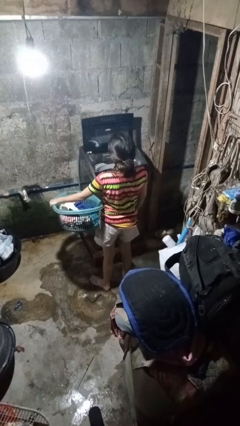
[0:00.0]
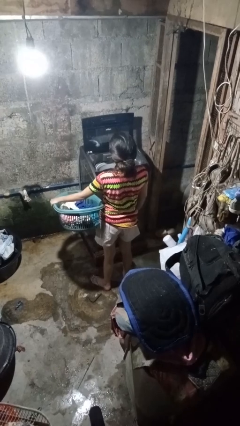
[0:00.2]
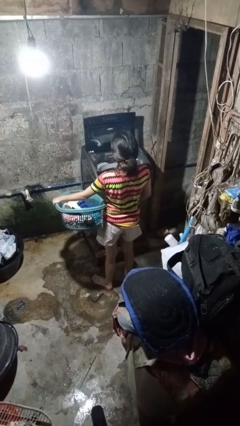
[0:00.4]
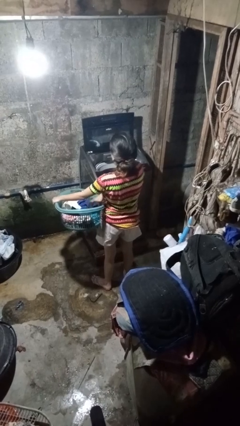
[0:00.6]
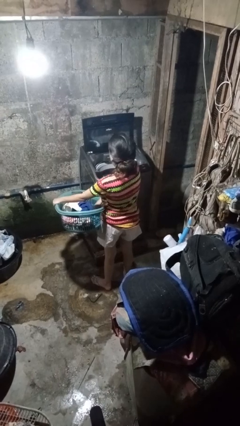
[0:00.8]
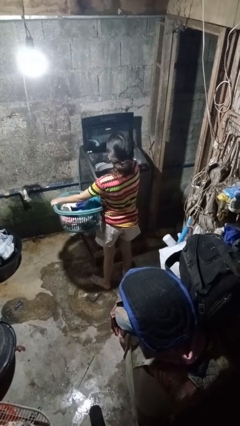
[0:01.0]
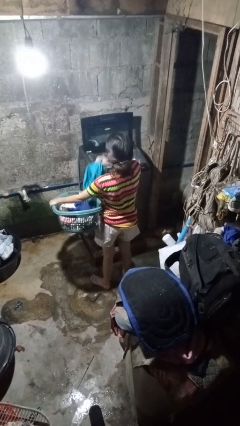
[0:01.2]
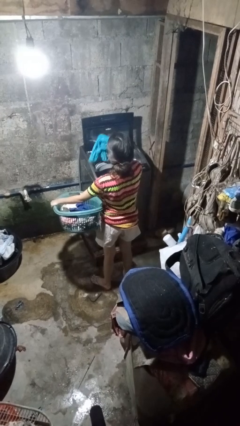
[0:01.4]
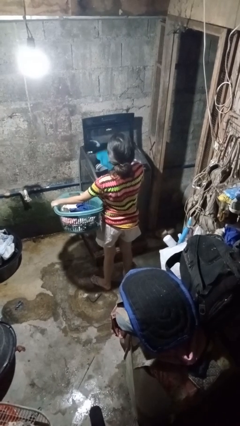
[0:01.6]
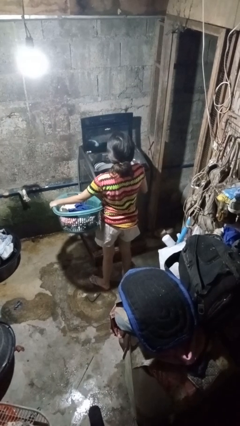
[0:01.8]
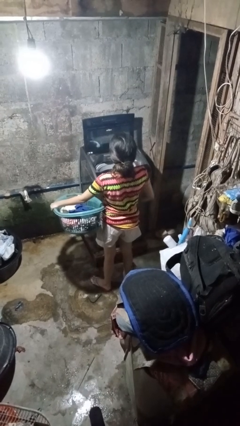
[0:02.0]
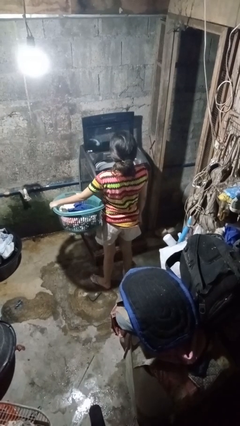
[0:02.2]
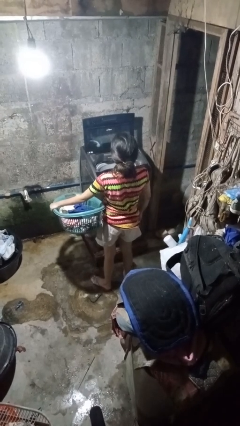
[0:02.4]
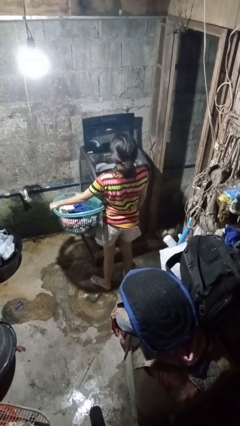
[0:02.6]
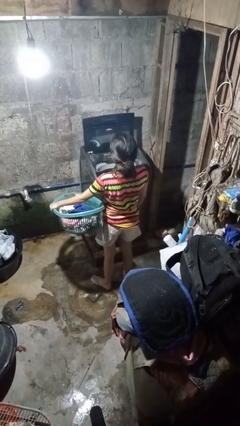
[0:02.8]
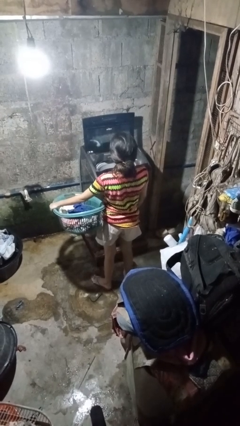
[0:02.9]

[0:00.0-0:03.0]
person loads clotheswasher

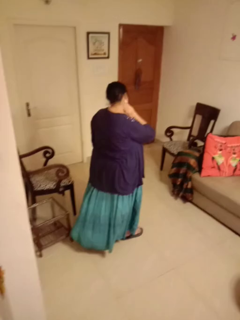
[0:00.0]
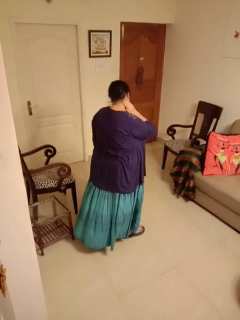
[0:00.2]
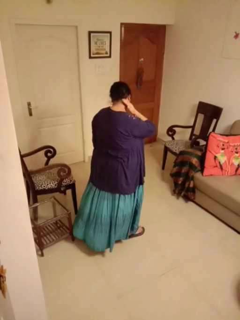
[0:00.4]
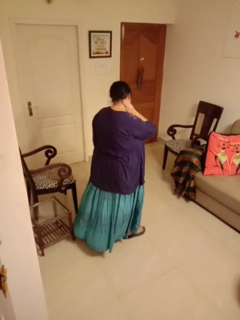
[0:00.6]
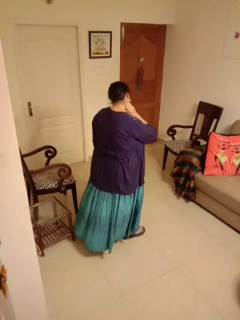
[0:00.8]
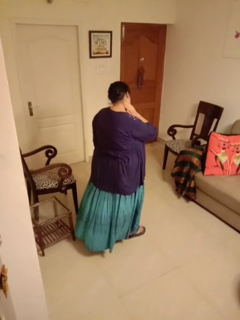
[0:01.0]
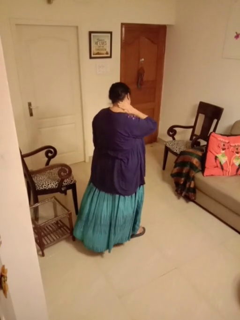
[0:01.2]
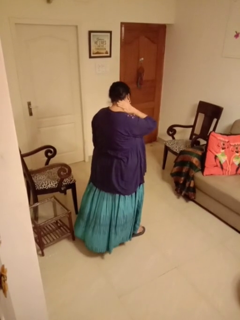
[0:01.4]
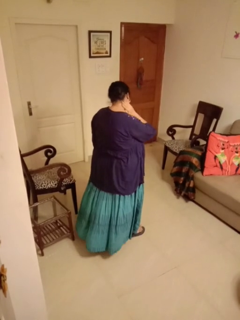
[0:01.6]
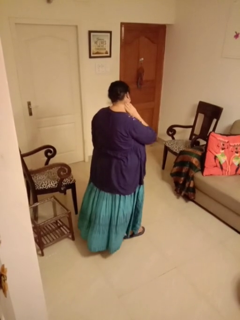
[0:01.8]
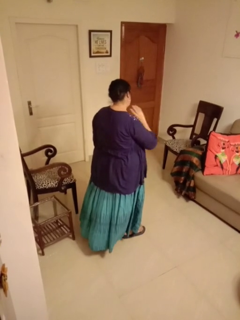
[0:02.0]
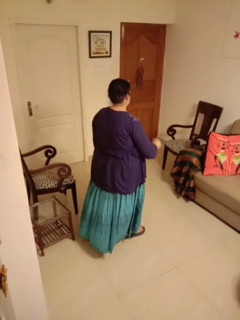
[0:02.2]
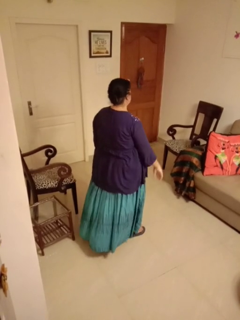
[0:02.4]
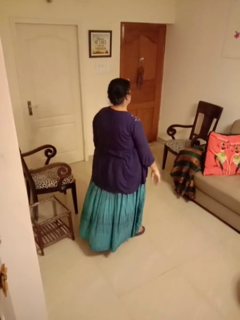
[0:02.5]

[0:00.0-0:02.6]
person rubs neck

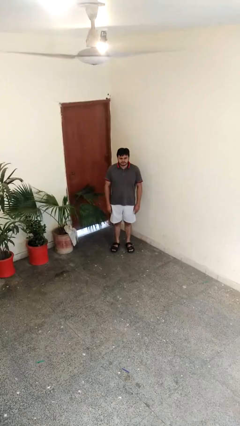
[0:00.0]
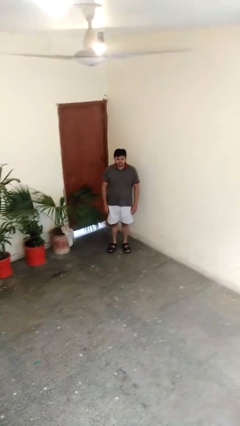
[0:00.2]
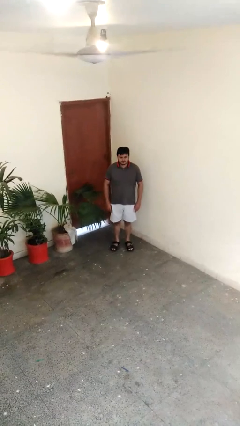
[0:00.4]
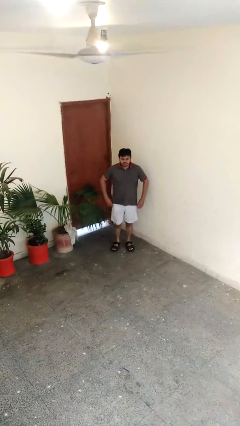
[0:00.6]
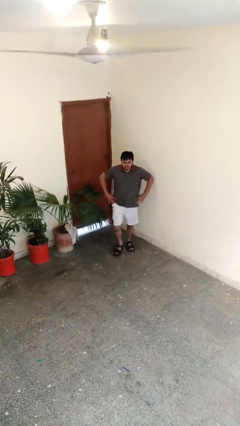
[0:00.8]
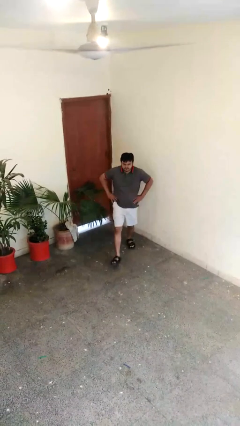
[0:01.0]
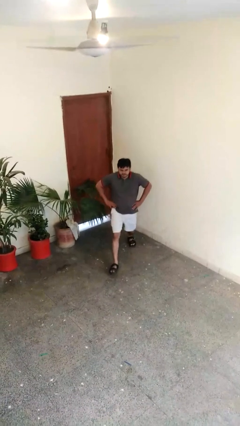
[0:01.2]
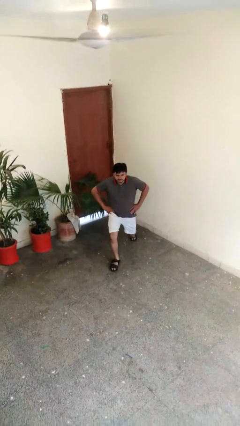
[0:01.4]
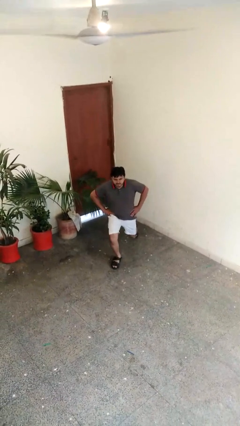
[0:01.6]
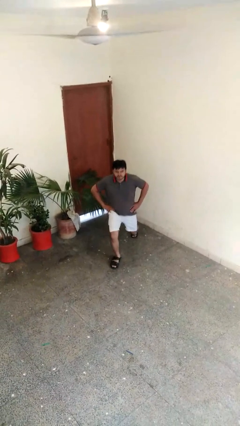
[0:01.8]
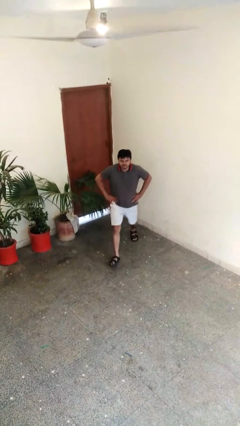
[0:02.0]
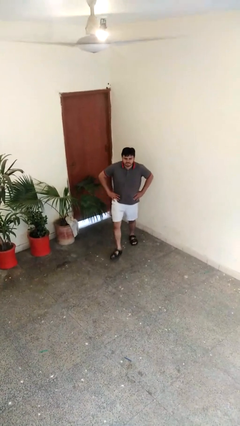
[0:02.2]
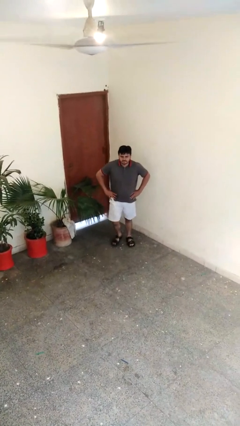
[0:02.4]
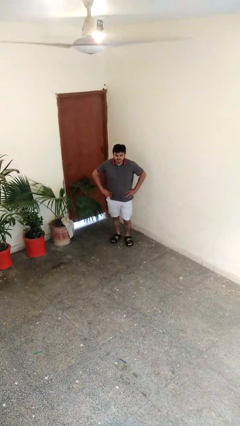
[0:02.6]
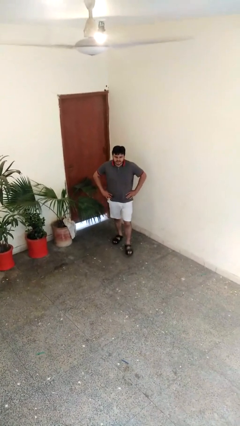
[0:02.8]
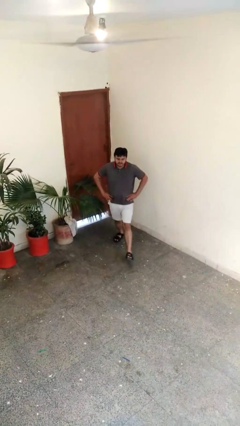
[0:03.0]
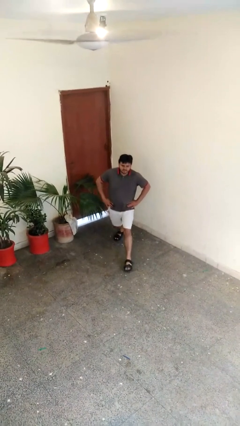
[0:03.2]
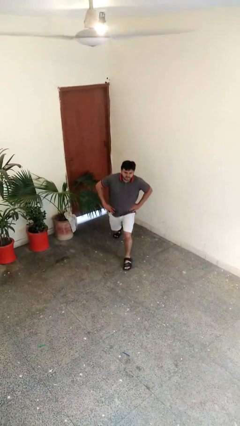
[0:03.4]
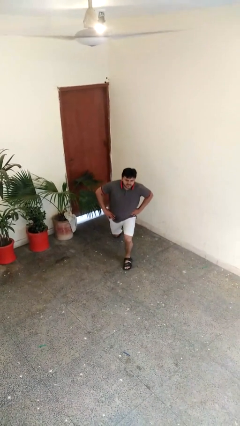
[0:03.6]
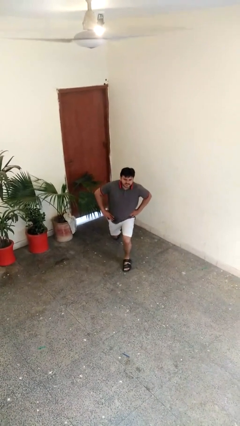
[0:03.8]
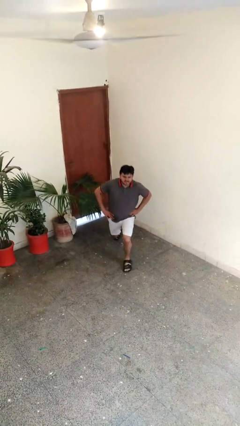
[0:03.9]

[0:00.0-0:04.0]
person exercises with lunges

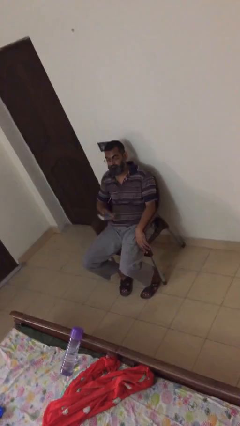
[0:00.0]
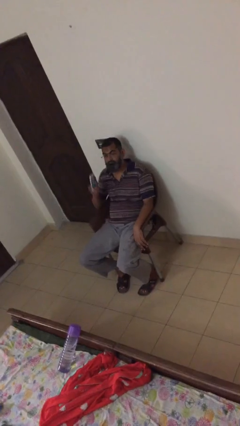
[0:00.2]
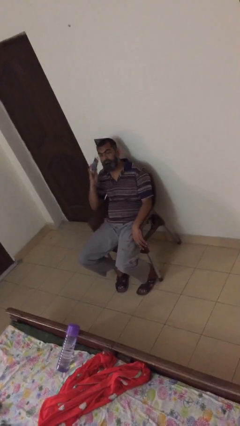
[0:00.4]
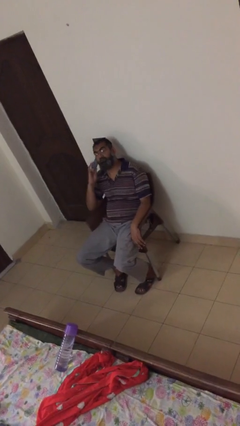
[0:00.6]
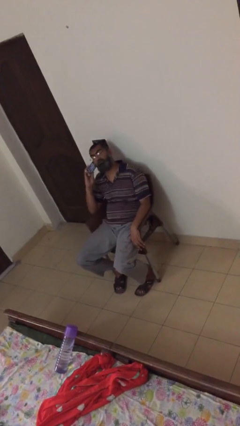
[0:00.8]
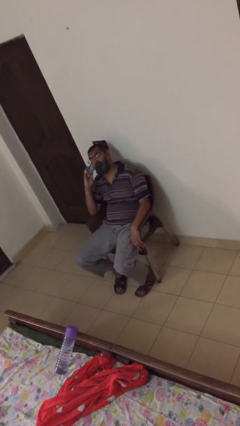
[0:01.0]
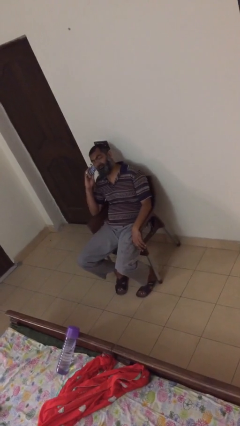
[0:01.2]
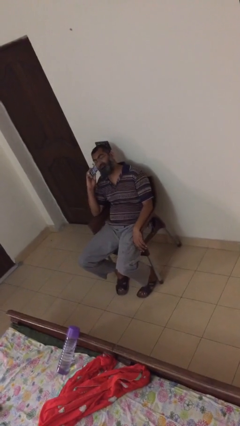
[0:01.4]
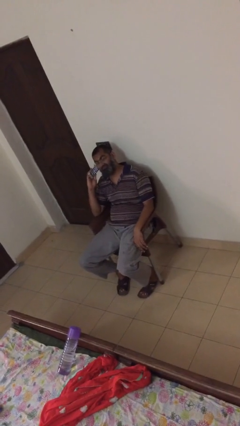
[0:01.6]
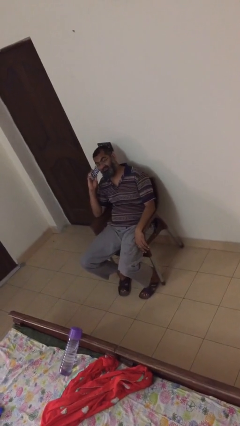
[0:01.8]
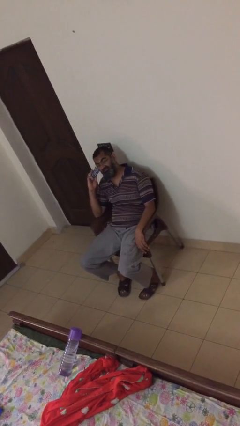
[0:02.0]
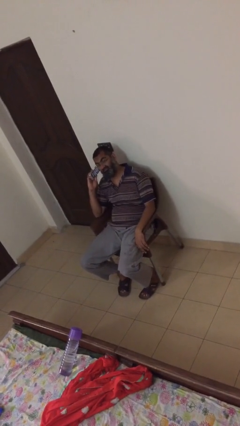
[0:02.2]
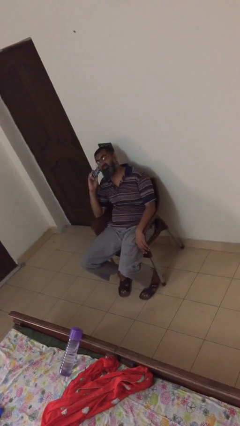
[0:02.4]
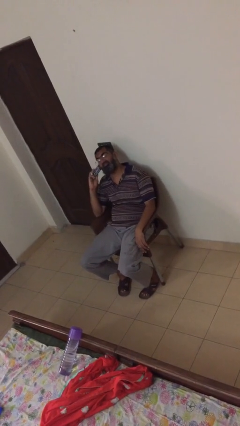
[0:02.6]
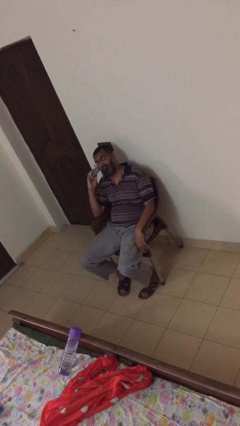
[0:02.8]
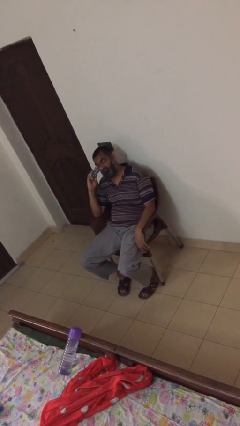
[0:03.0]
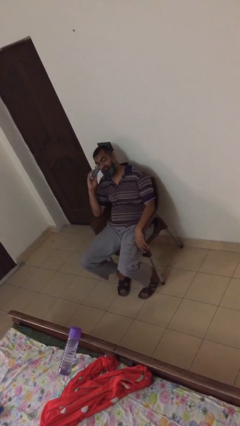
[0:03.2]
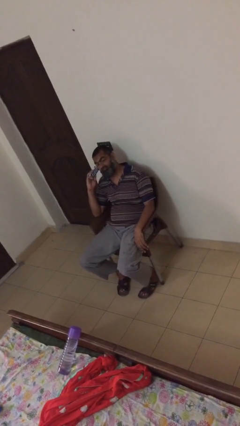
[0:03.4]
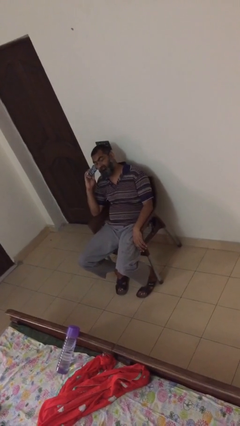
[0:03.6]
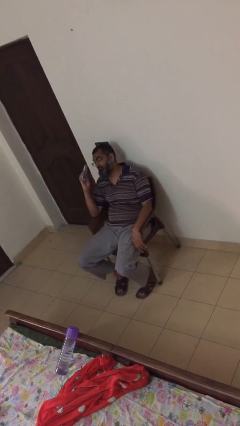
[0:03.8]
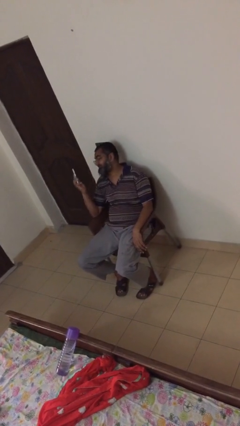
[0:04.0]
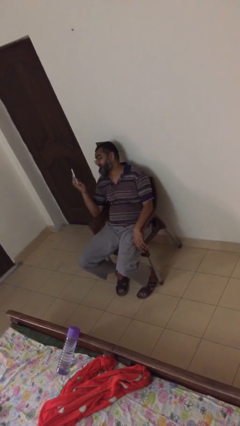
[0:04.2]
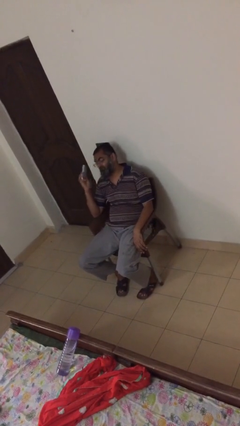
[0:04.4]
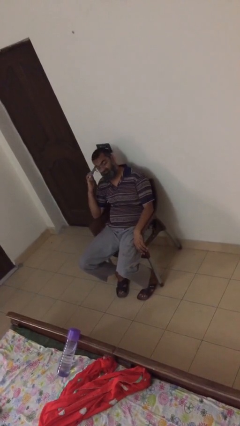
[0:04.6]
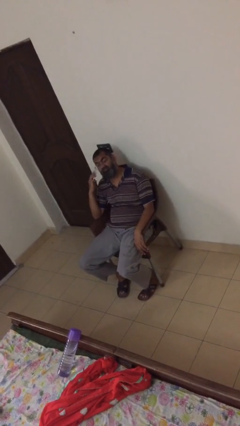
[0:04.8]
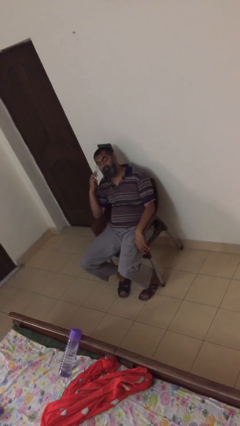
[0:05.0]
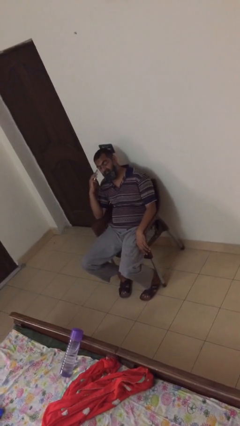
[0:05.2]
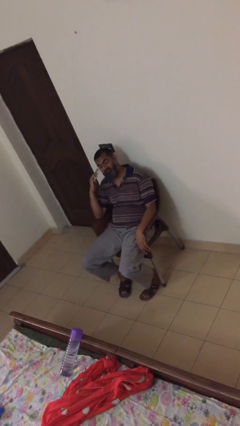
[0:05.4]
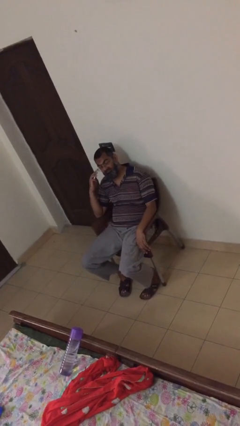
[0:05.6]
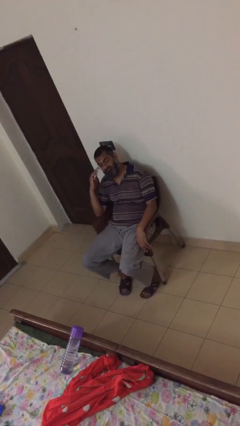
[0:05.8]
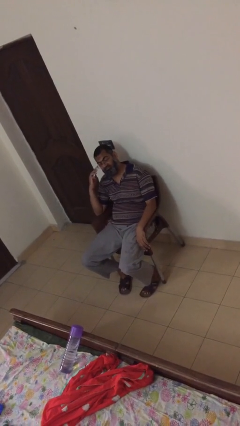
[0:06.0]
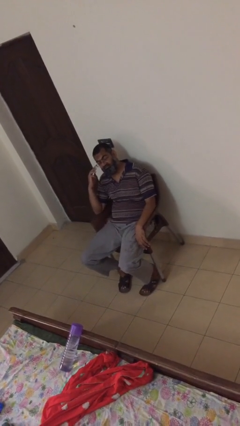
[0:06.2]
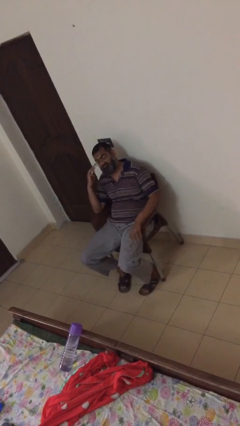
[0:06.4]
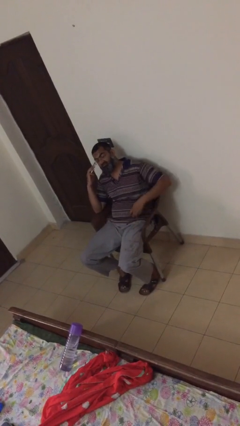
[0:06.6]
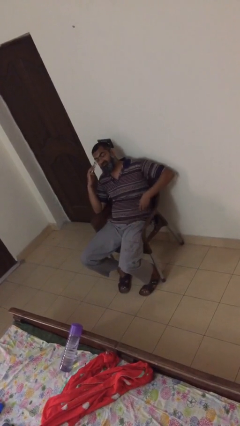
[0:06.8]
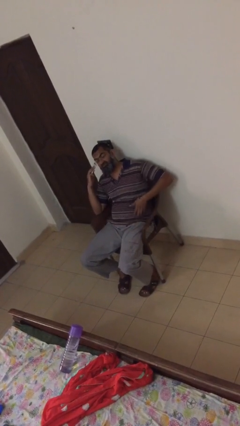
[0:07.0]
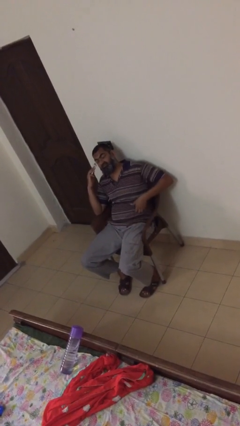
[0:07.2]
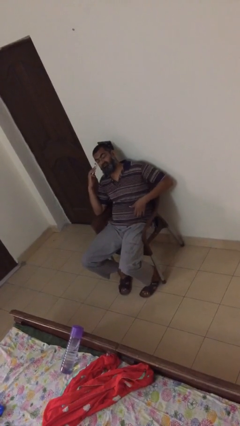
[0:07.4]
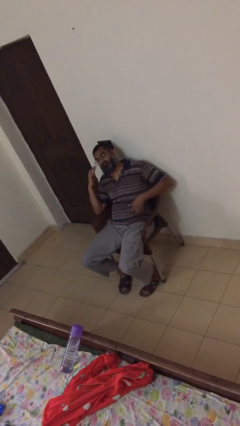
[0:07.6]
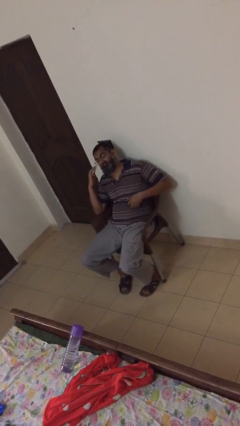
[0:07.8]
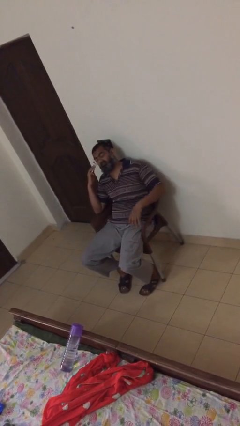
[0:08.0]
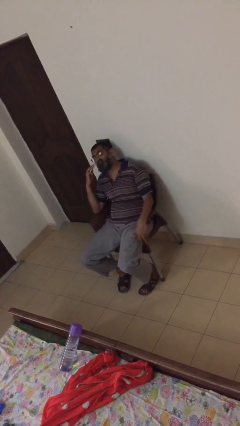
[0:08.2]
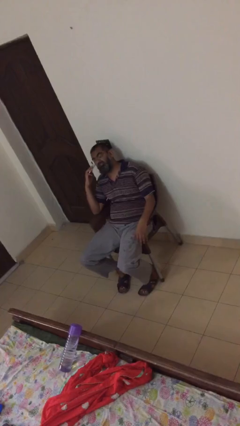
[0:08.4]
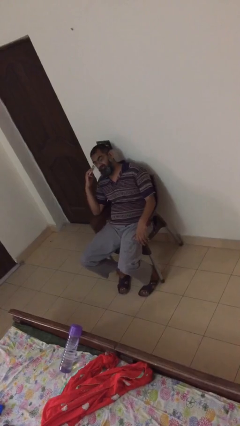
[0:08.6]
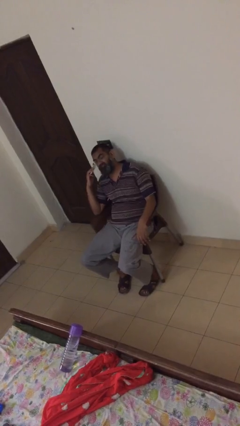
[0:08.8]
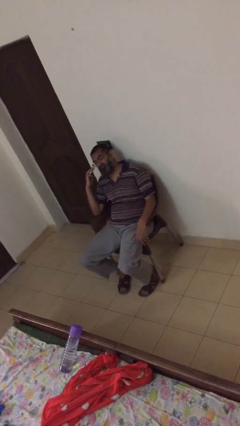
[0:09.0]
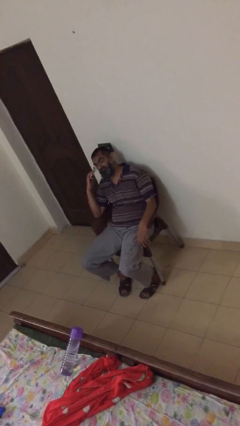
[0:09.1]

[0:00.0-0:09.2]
person talks on phone
